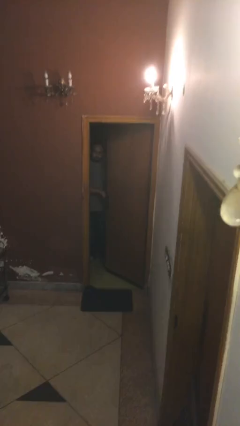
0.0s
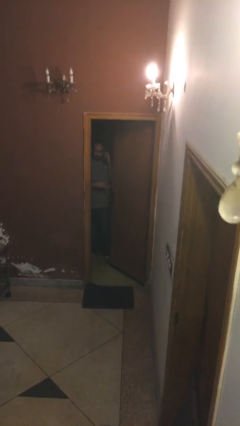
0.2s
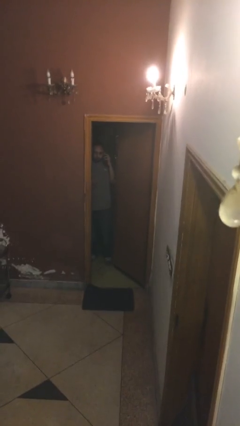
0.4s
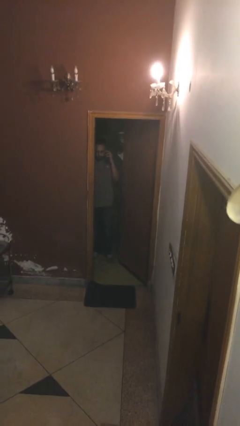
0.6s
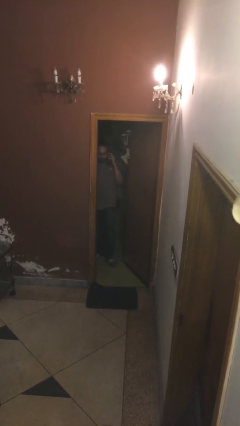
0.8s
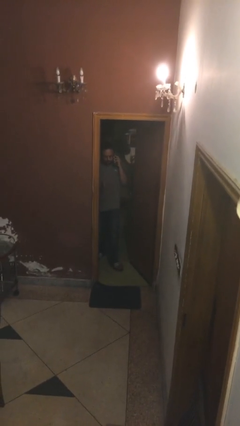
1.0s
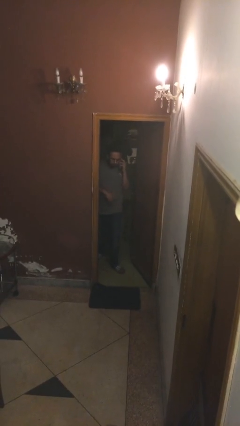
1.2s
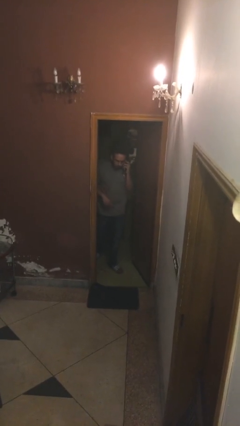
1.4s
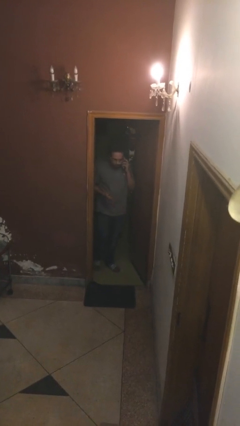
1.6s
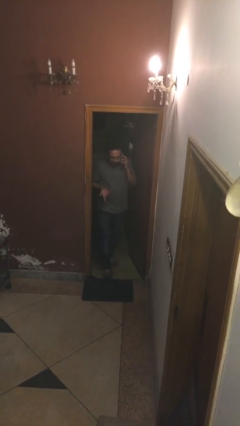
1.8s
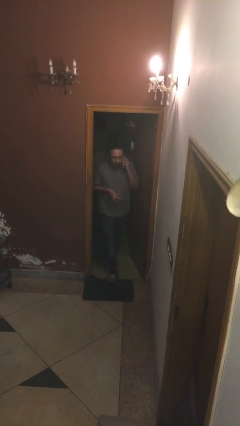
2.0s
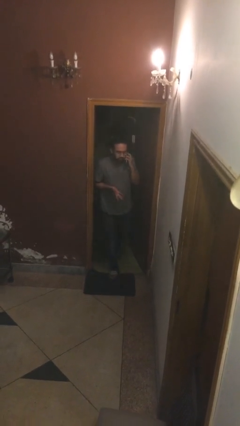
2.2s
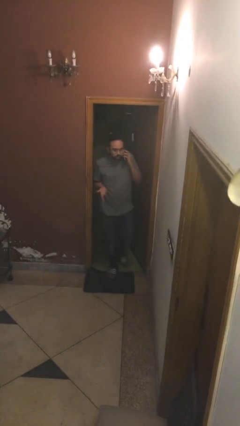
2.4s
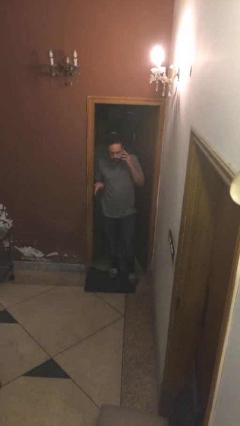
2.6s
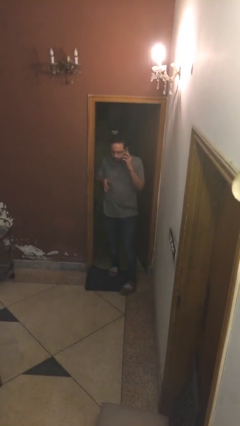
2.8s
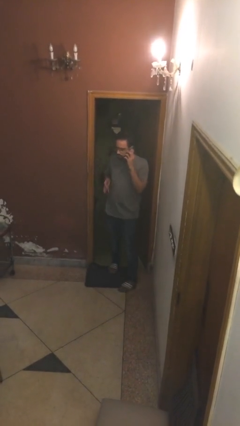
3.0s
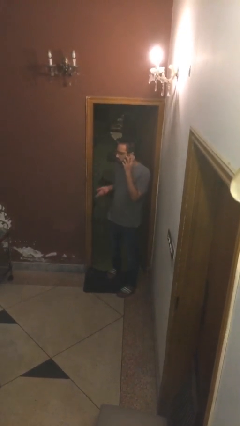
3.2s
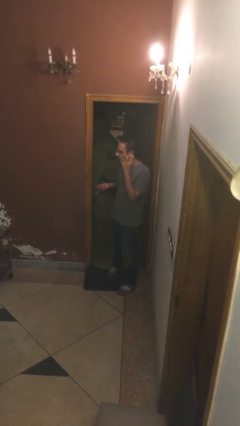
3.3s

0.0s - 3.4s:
person enters scene through structure

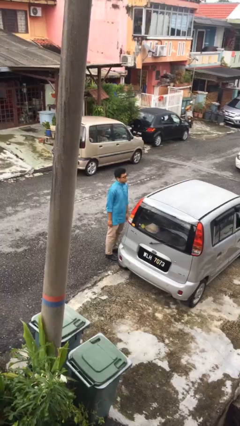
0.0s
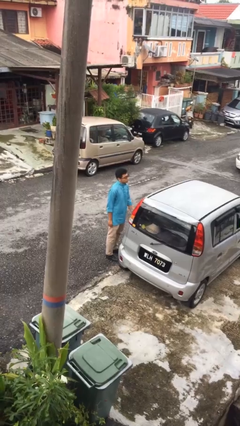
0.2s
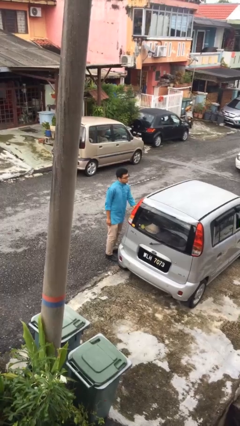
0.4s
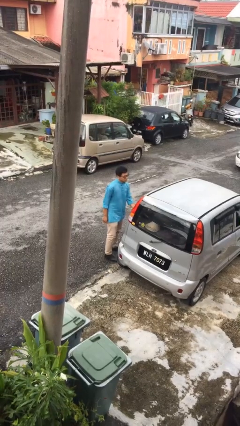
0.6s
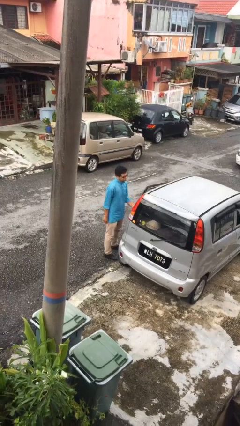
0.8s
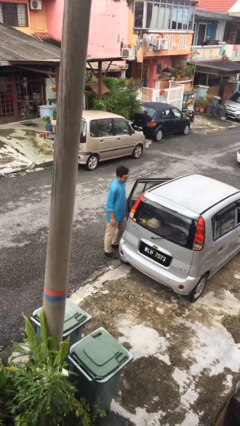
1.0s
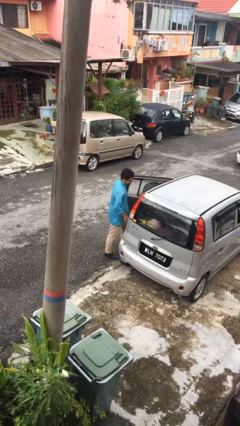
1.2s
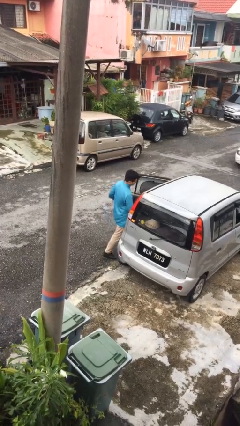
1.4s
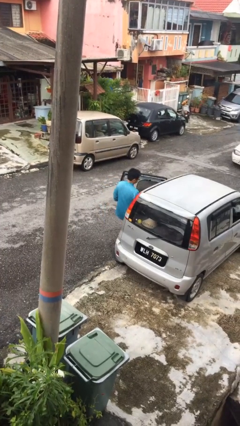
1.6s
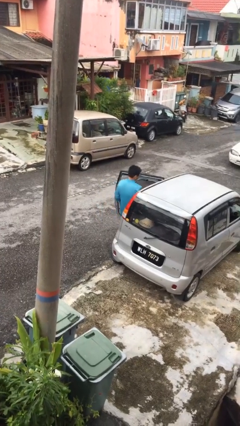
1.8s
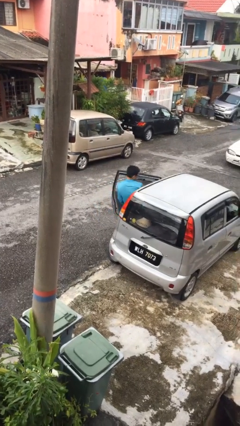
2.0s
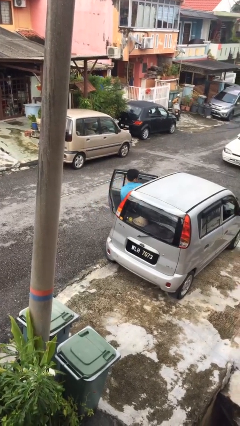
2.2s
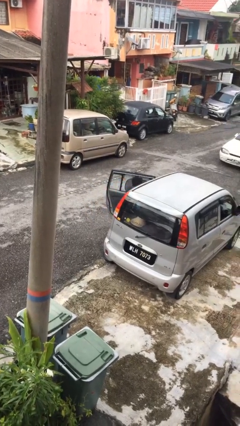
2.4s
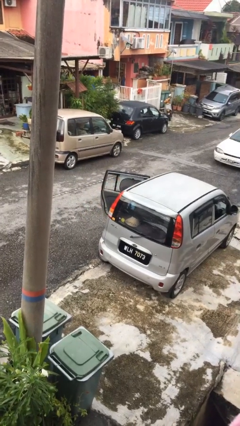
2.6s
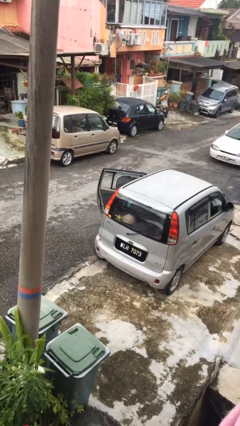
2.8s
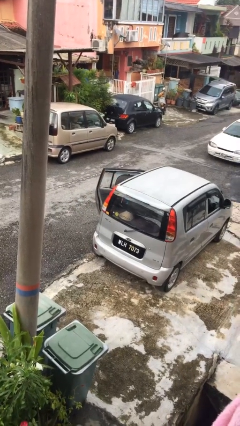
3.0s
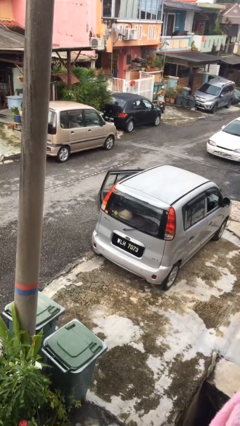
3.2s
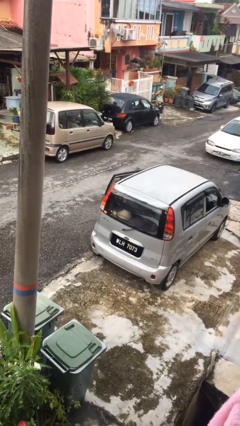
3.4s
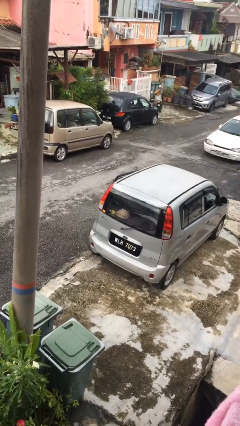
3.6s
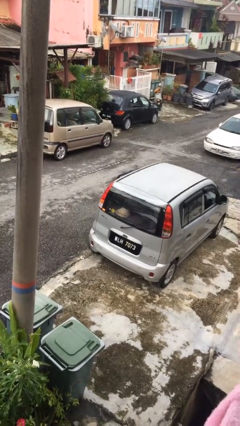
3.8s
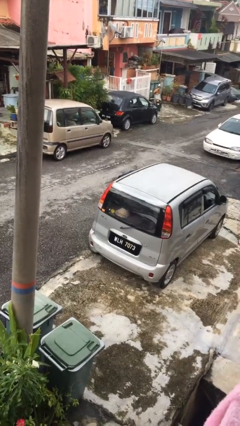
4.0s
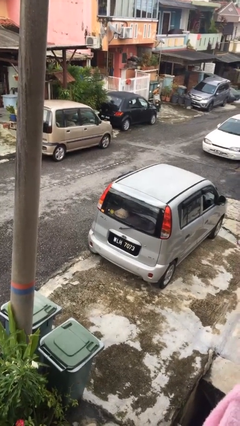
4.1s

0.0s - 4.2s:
person enters car

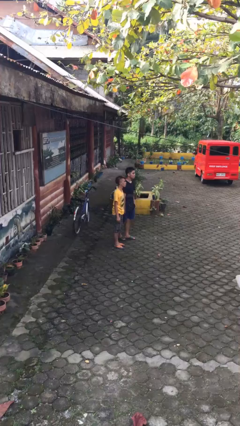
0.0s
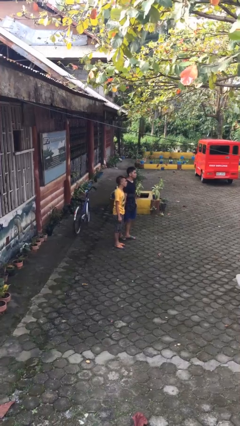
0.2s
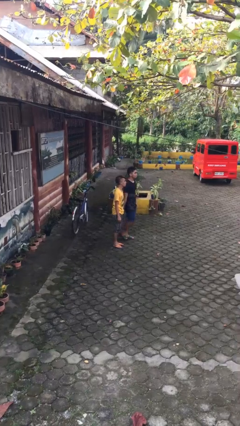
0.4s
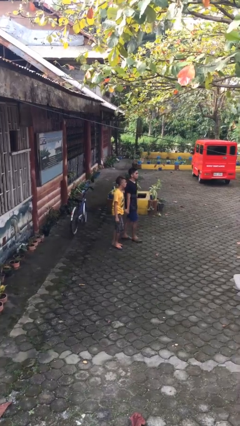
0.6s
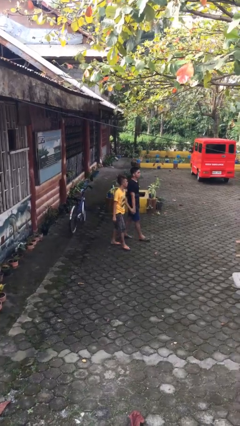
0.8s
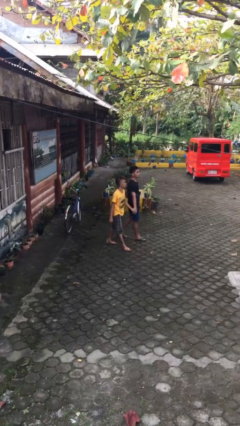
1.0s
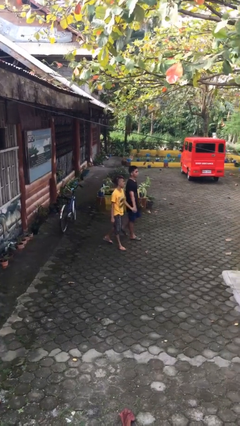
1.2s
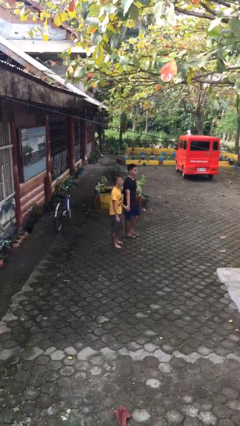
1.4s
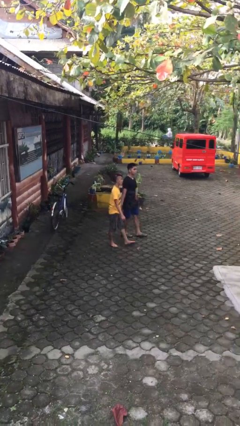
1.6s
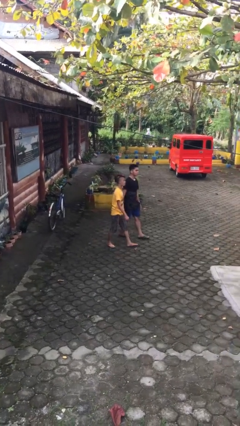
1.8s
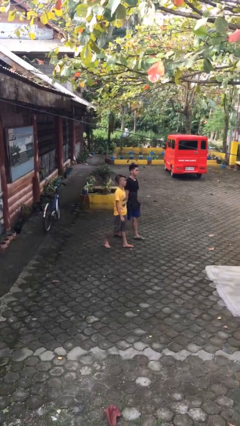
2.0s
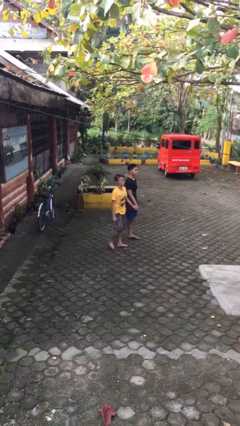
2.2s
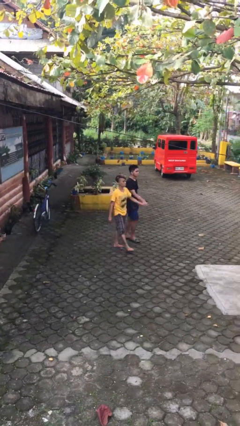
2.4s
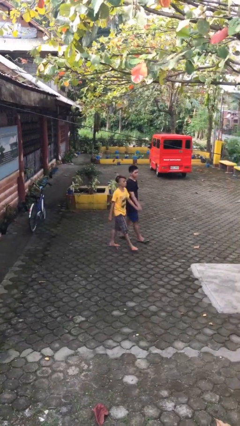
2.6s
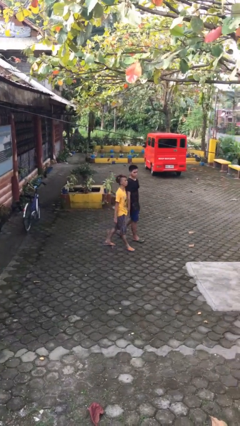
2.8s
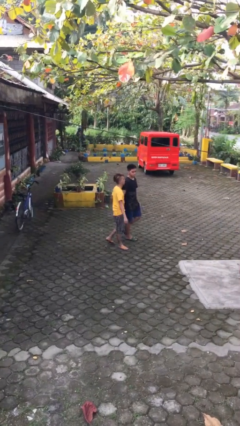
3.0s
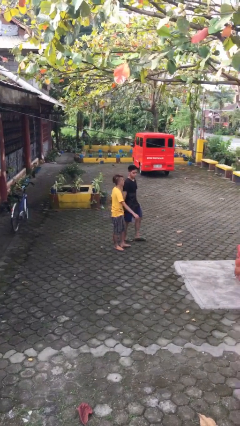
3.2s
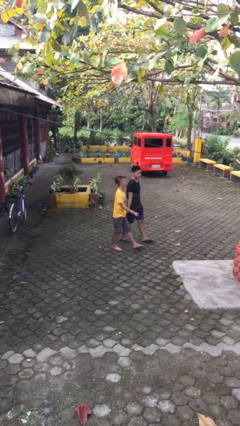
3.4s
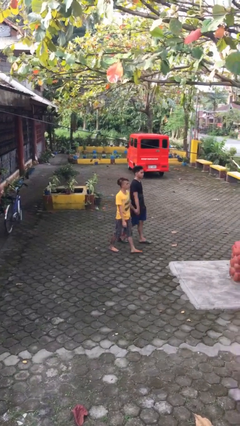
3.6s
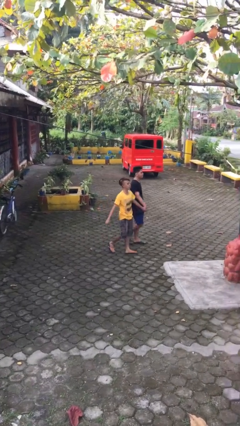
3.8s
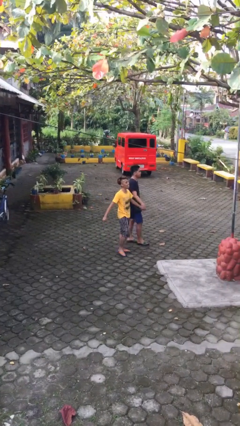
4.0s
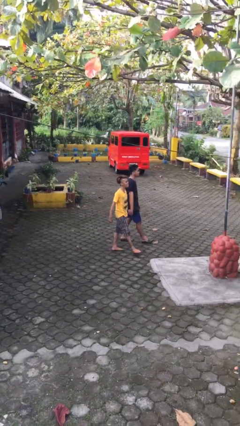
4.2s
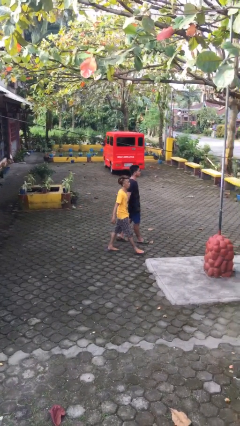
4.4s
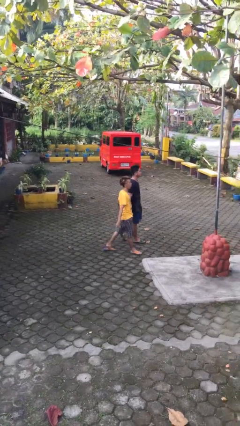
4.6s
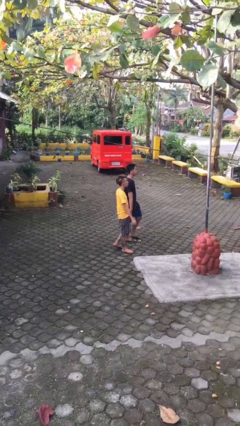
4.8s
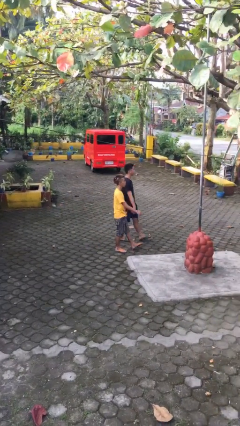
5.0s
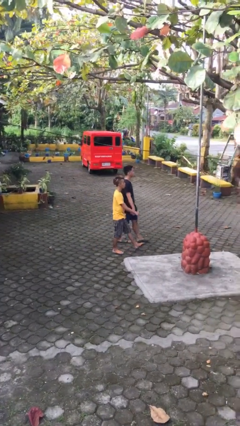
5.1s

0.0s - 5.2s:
person holds hand

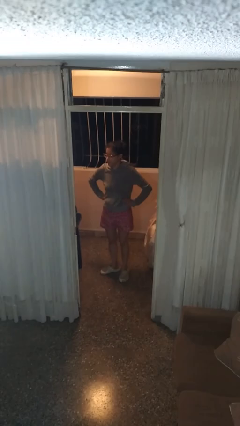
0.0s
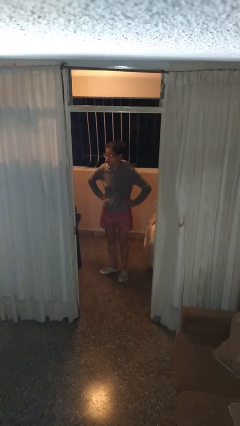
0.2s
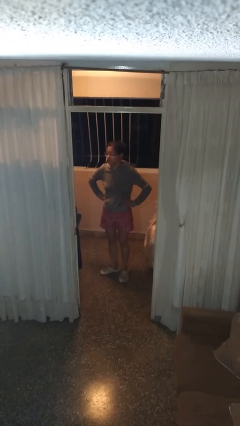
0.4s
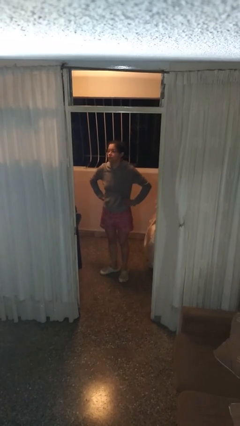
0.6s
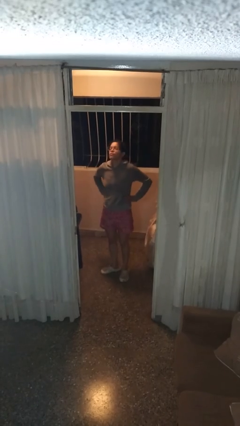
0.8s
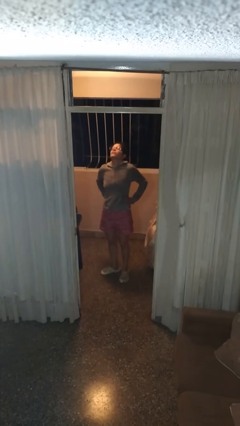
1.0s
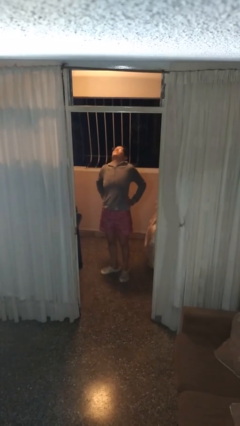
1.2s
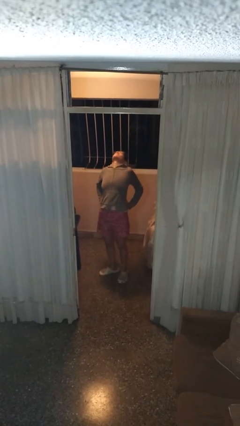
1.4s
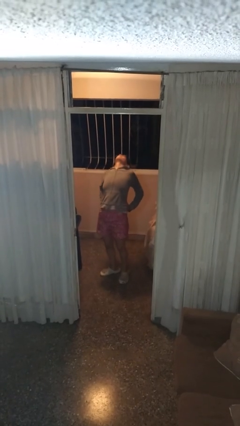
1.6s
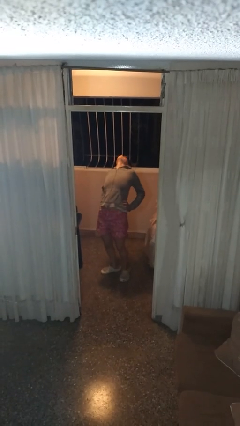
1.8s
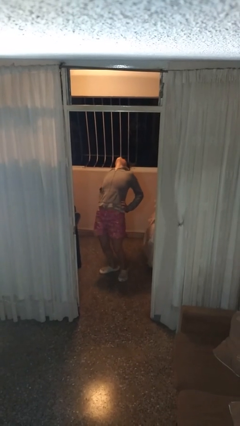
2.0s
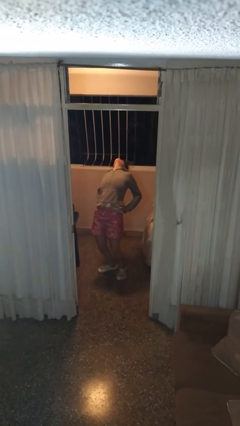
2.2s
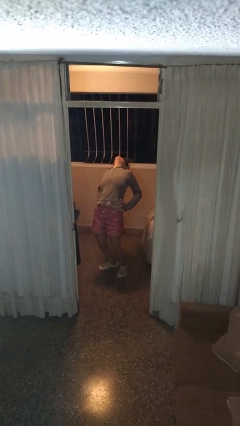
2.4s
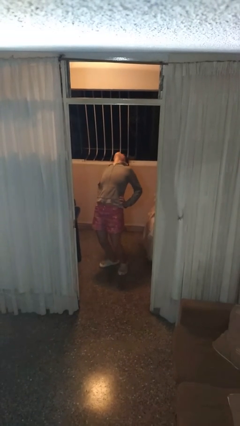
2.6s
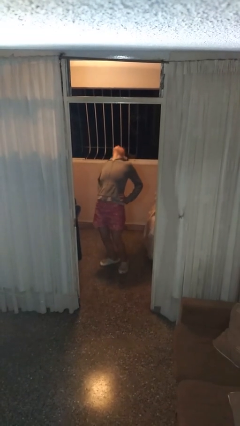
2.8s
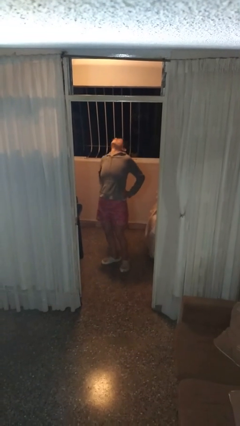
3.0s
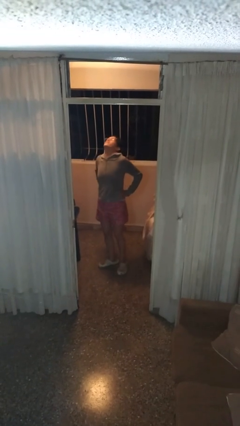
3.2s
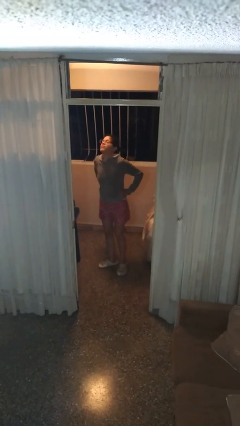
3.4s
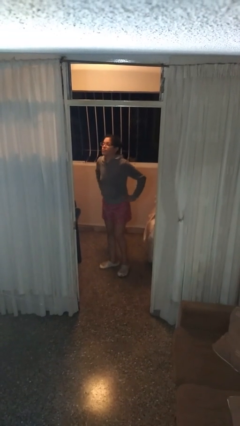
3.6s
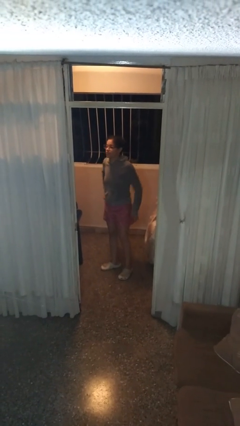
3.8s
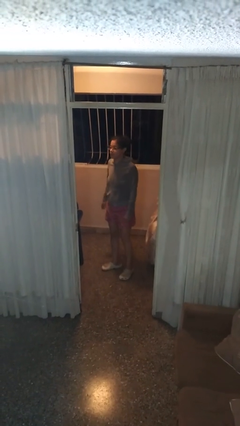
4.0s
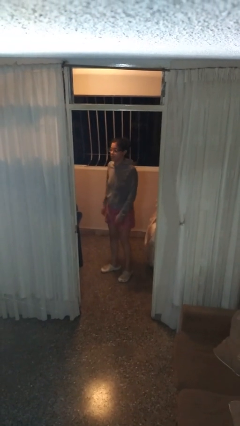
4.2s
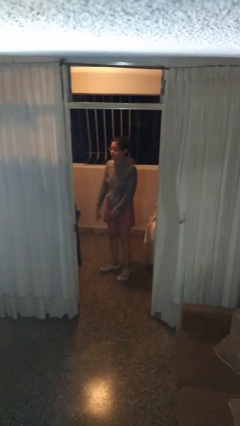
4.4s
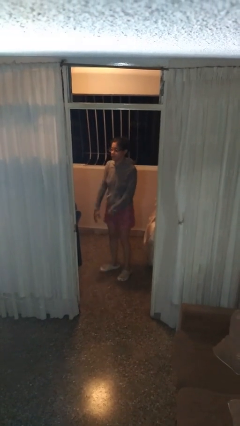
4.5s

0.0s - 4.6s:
person stretches back

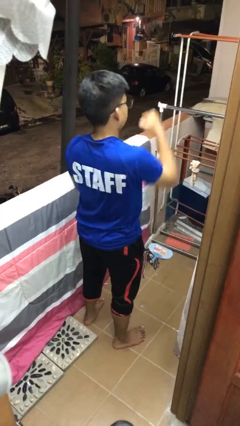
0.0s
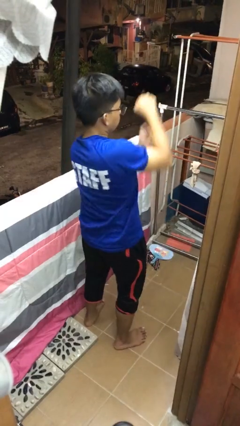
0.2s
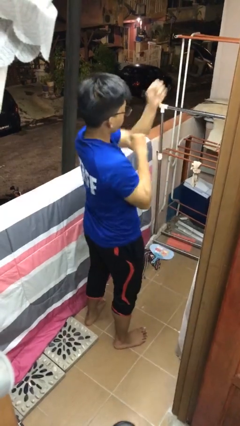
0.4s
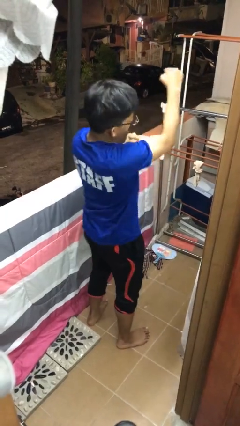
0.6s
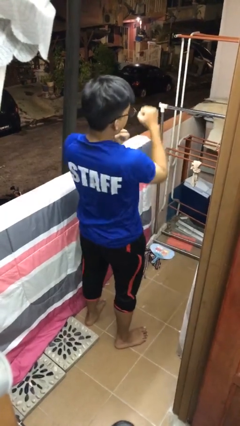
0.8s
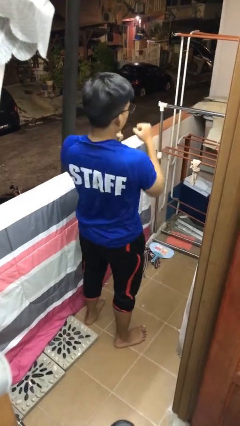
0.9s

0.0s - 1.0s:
person punches
